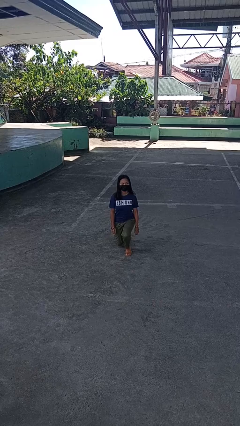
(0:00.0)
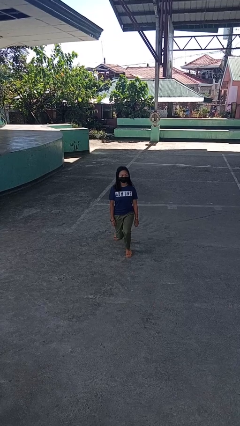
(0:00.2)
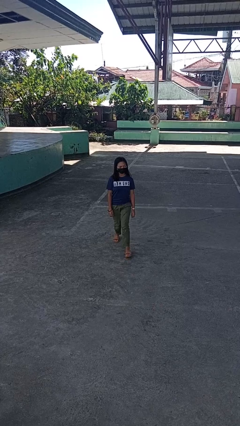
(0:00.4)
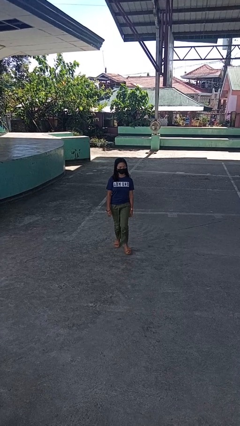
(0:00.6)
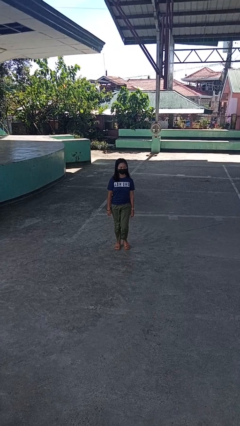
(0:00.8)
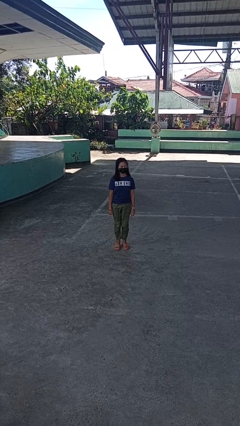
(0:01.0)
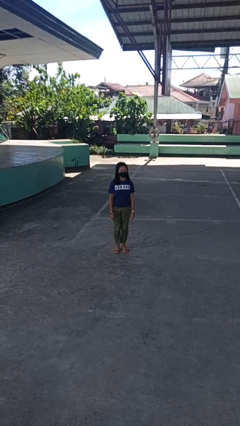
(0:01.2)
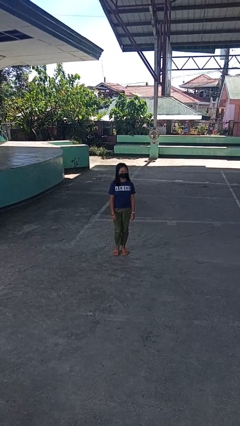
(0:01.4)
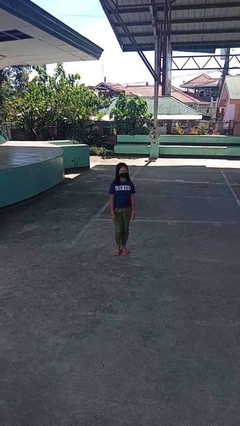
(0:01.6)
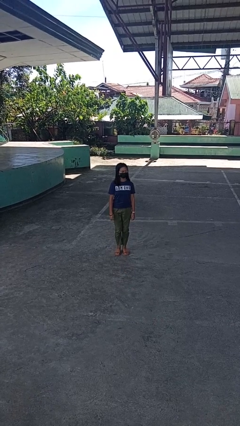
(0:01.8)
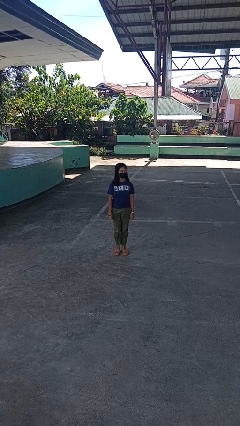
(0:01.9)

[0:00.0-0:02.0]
person stands up from floor

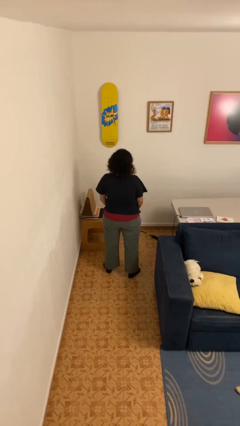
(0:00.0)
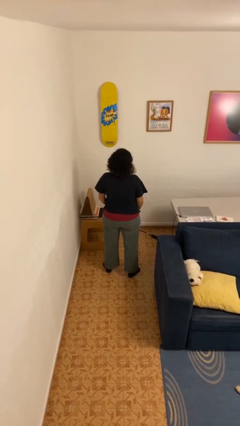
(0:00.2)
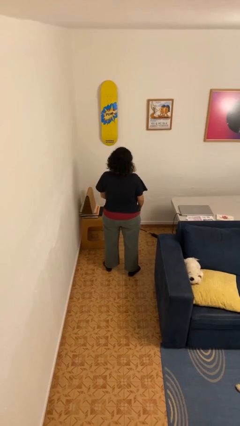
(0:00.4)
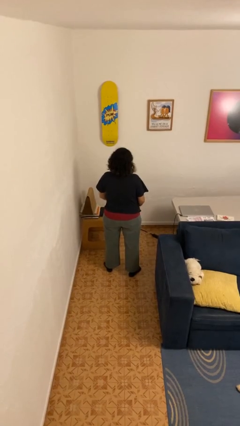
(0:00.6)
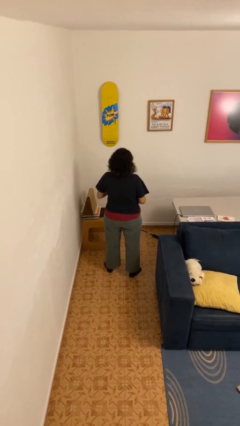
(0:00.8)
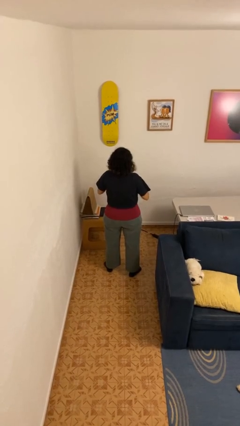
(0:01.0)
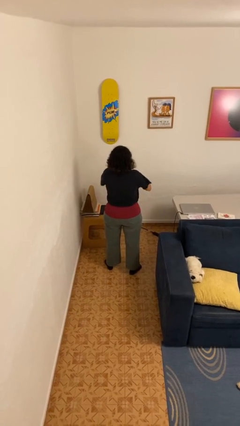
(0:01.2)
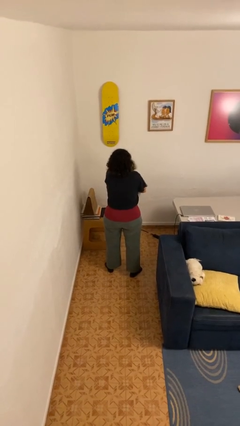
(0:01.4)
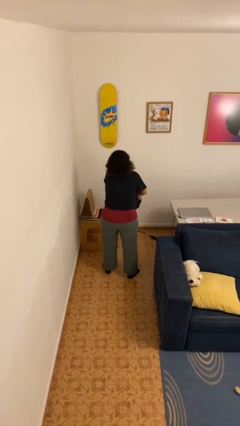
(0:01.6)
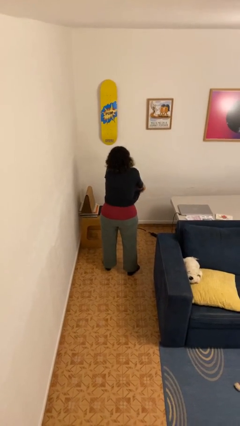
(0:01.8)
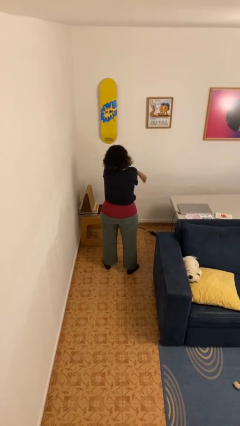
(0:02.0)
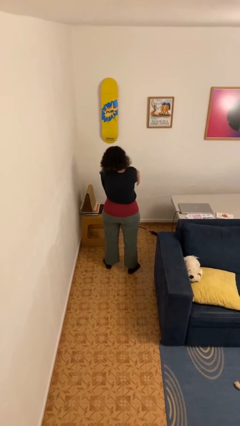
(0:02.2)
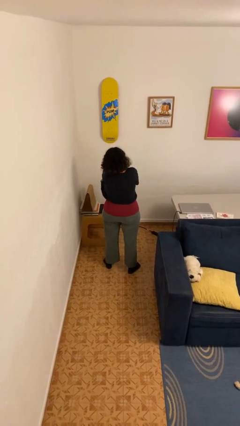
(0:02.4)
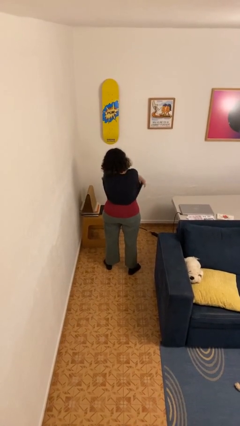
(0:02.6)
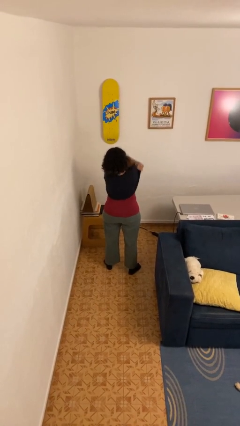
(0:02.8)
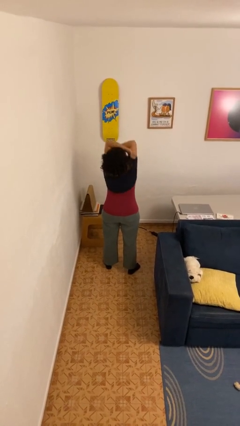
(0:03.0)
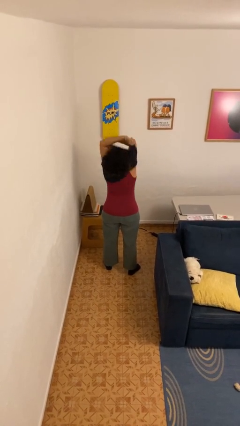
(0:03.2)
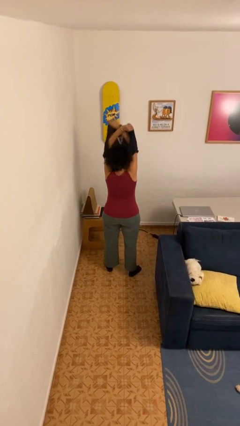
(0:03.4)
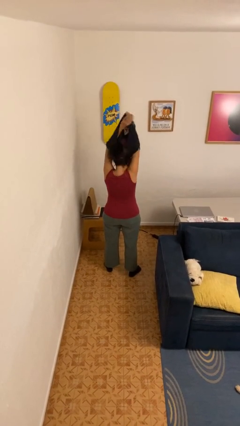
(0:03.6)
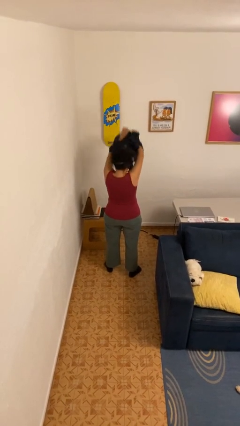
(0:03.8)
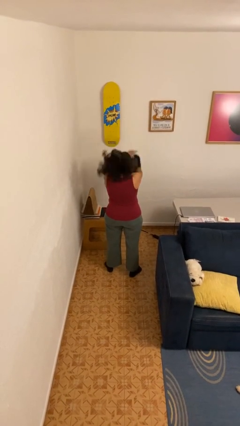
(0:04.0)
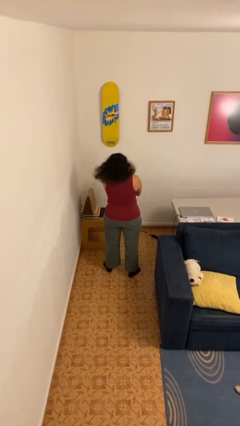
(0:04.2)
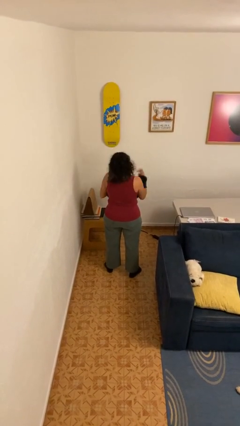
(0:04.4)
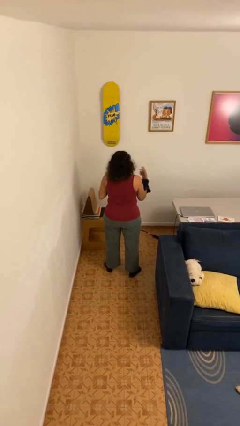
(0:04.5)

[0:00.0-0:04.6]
person takes off shirt

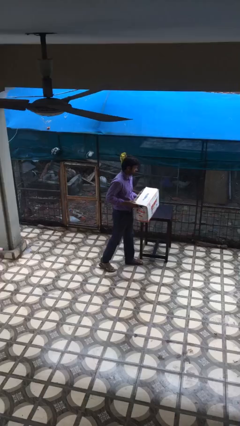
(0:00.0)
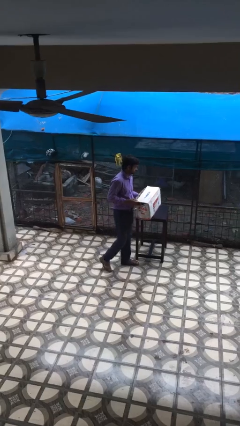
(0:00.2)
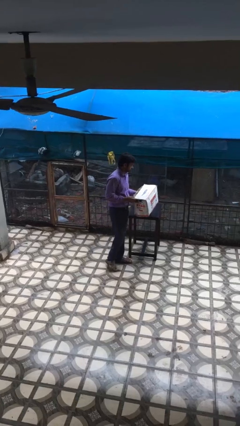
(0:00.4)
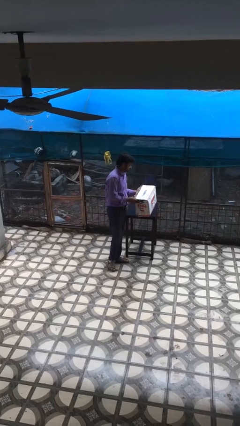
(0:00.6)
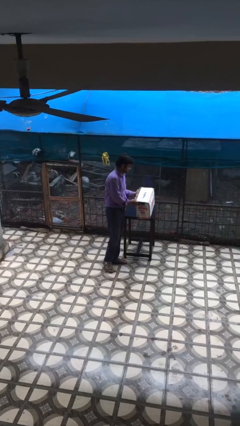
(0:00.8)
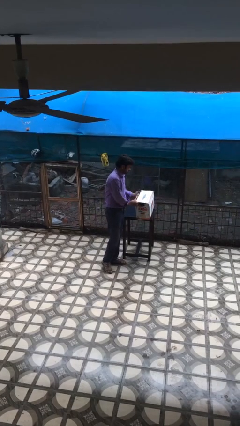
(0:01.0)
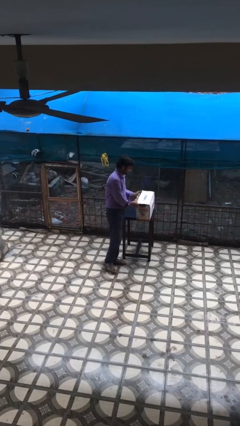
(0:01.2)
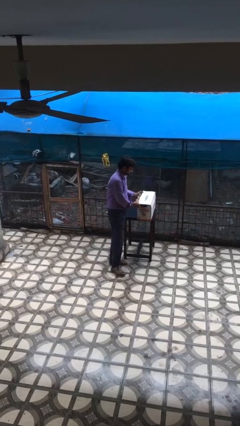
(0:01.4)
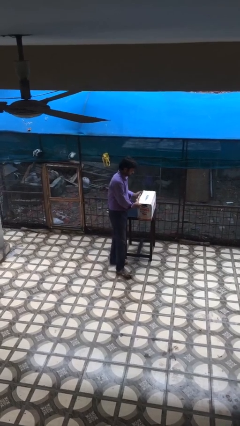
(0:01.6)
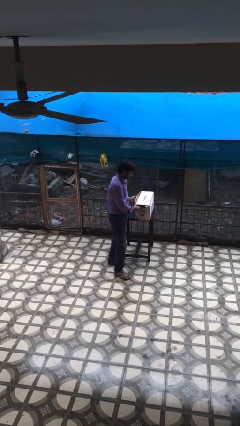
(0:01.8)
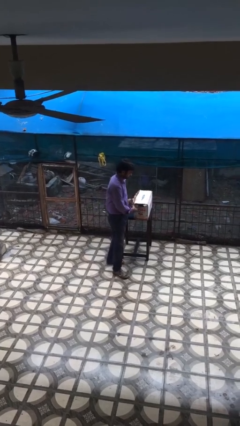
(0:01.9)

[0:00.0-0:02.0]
person puts down object on table

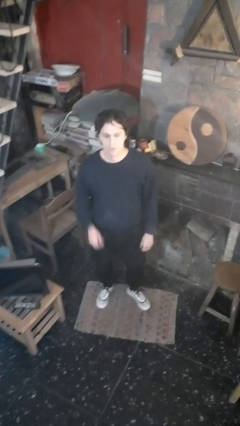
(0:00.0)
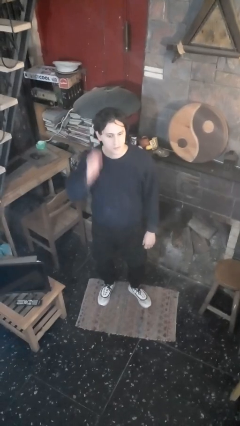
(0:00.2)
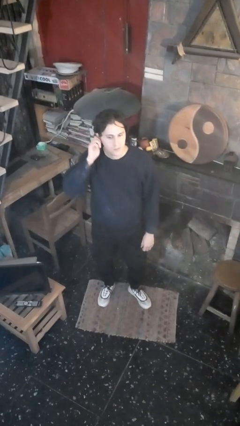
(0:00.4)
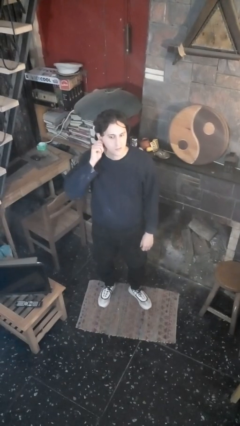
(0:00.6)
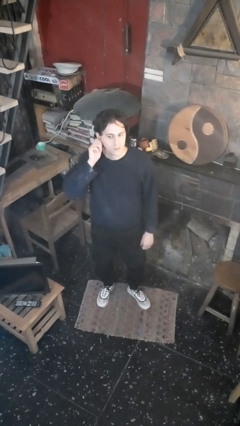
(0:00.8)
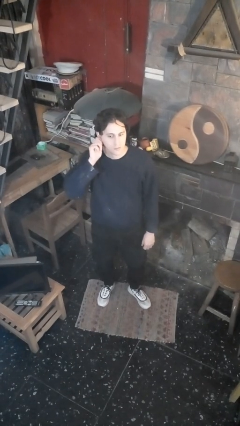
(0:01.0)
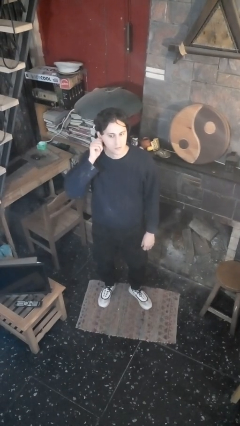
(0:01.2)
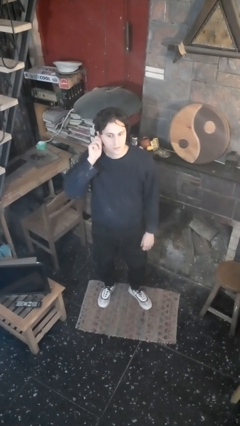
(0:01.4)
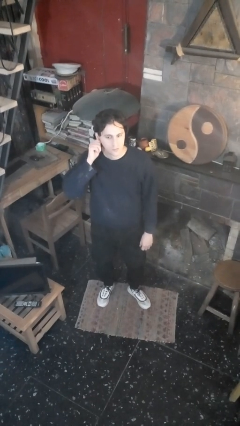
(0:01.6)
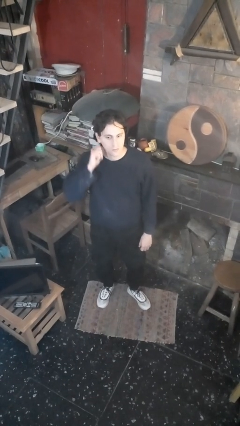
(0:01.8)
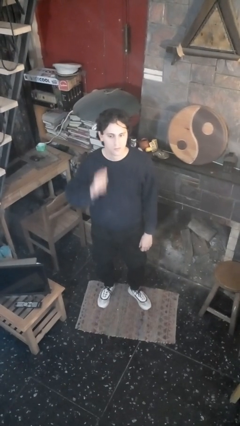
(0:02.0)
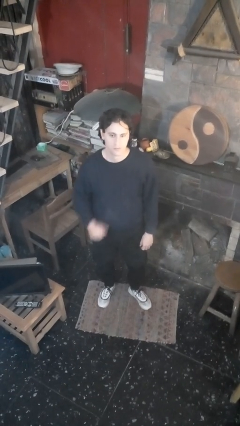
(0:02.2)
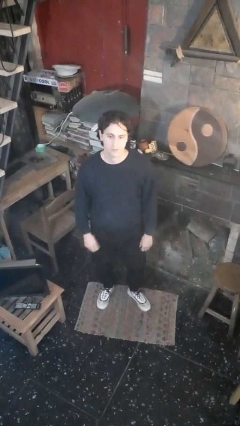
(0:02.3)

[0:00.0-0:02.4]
person touches earlobe

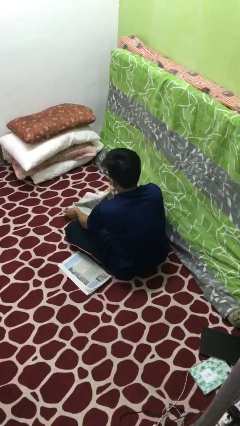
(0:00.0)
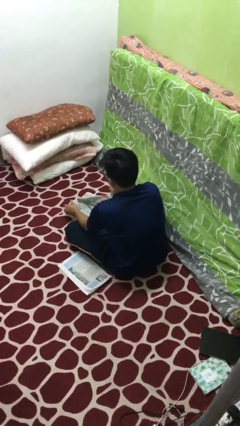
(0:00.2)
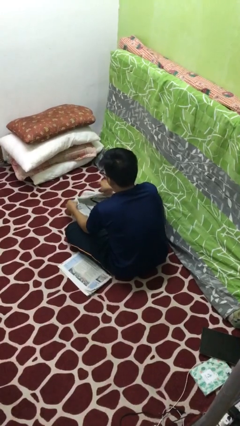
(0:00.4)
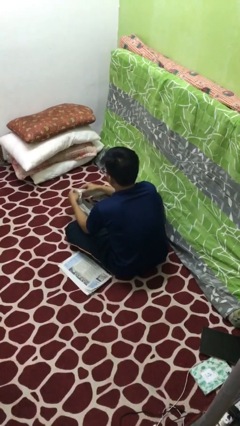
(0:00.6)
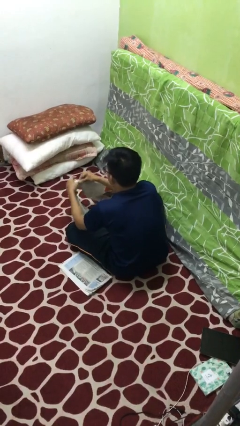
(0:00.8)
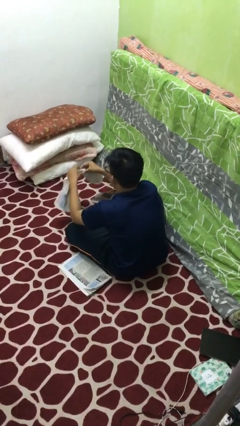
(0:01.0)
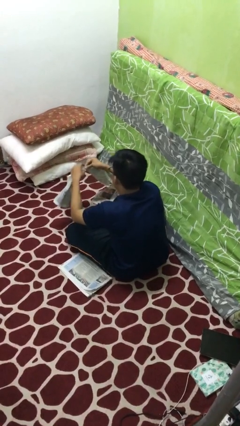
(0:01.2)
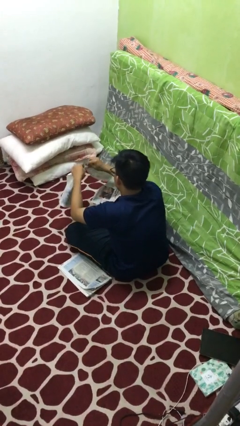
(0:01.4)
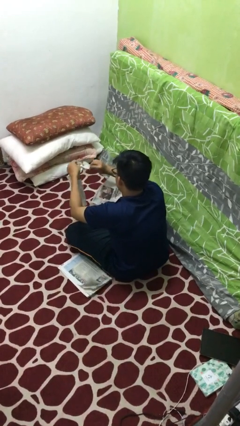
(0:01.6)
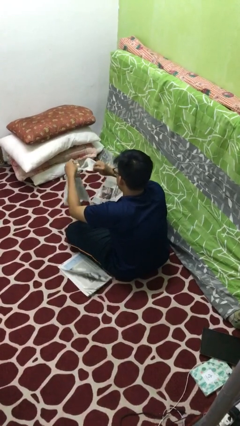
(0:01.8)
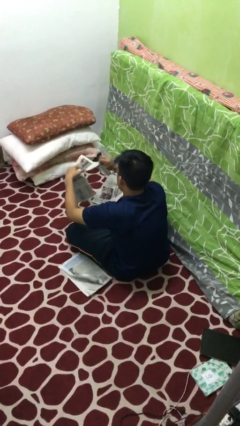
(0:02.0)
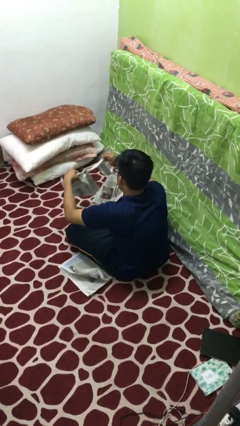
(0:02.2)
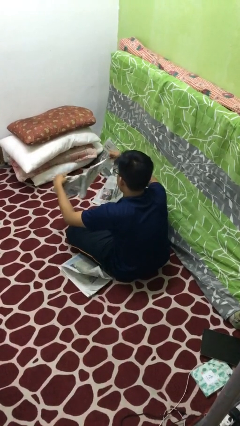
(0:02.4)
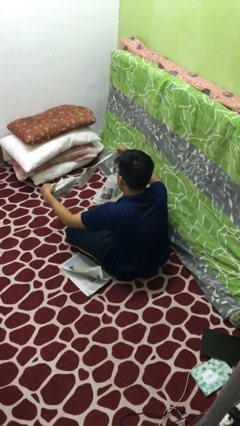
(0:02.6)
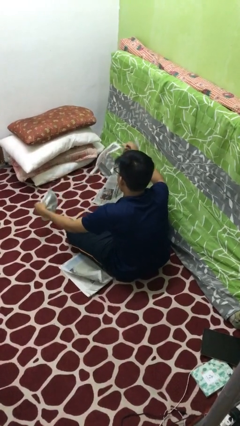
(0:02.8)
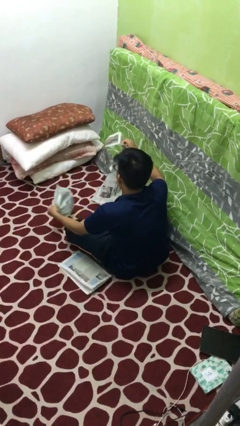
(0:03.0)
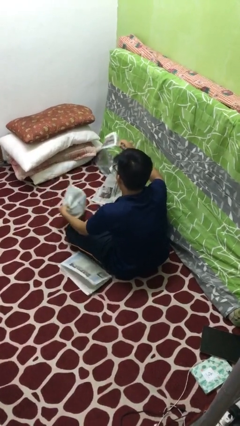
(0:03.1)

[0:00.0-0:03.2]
person tears paper

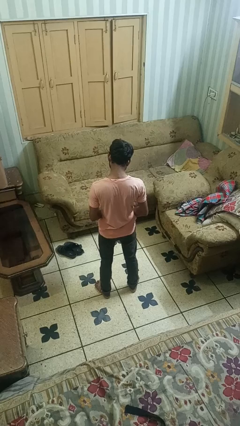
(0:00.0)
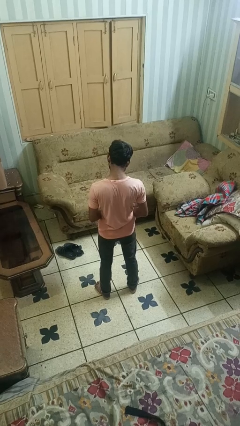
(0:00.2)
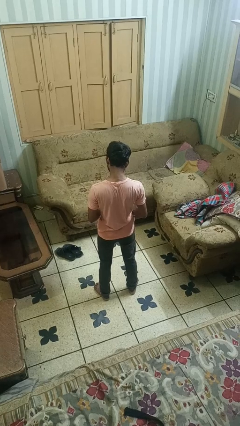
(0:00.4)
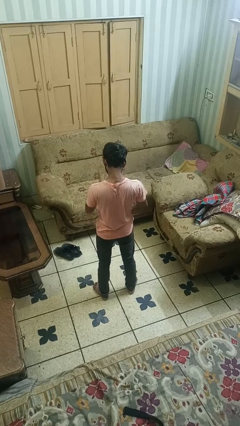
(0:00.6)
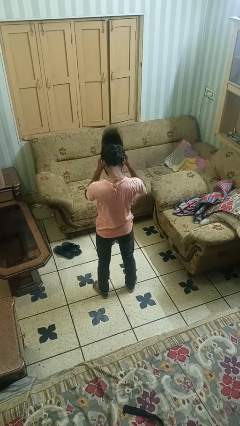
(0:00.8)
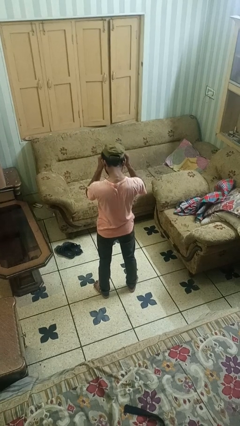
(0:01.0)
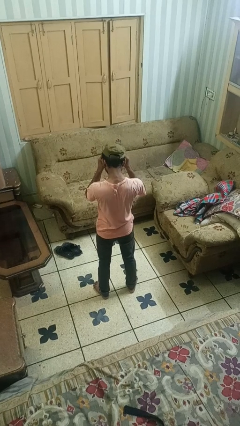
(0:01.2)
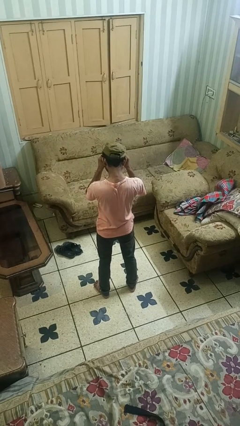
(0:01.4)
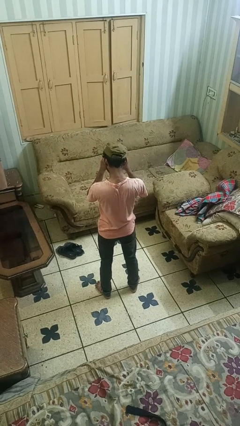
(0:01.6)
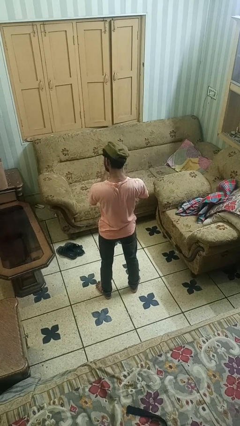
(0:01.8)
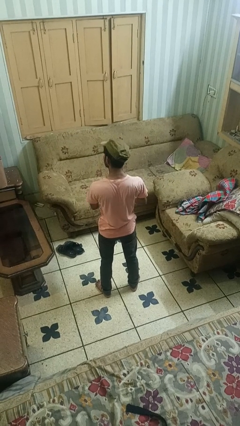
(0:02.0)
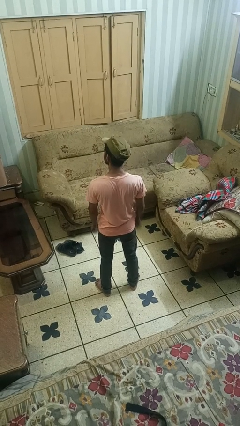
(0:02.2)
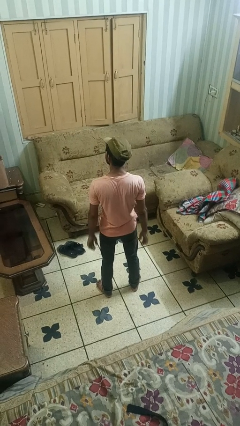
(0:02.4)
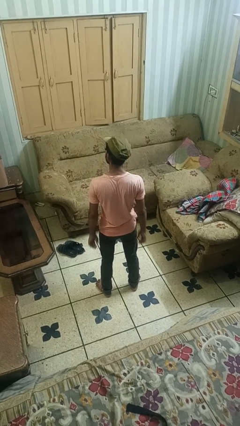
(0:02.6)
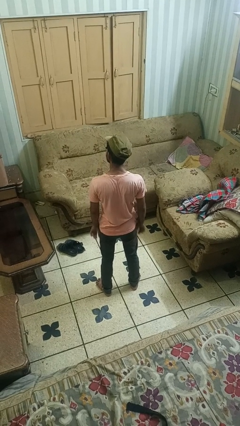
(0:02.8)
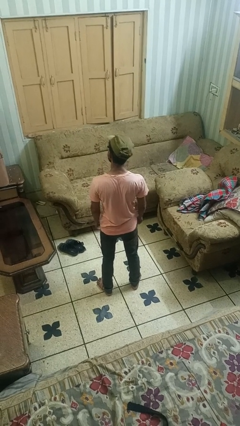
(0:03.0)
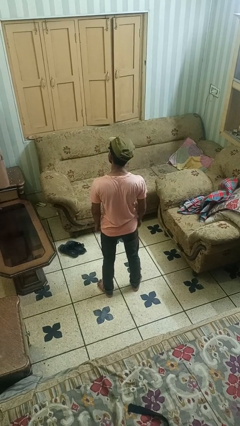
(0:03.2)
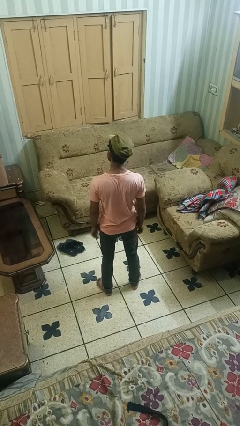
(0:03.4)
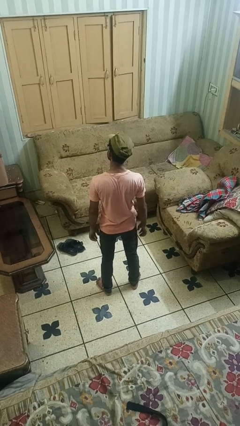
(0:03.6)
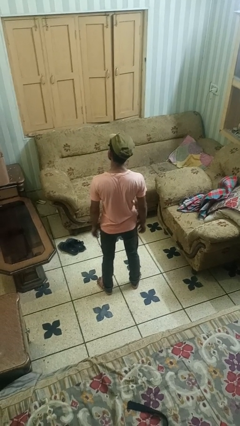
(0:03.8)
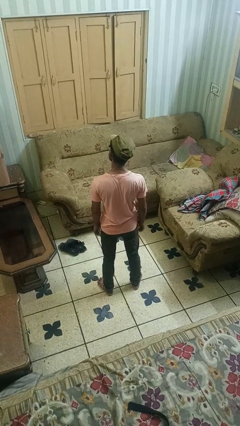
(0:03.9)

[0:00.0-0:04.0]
person puts on hat
